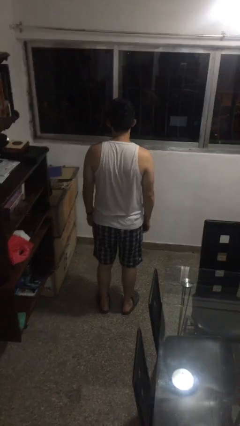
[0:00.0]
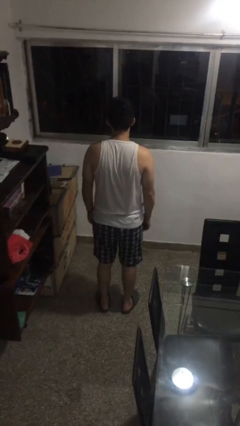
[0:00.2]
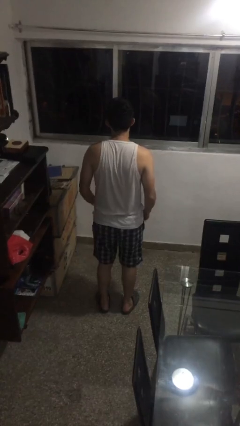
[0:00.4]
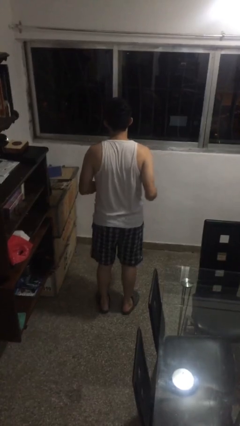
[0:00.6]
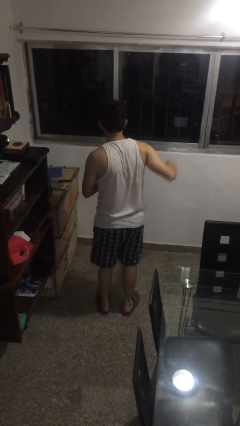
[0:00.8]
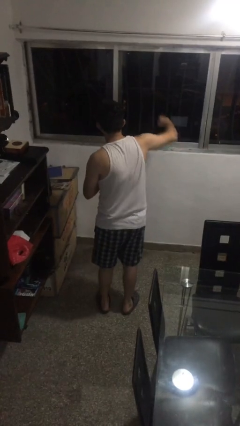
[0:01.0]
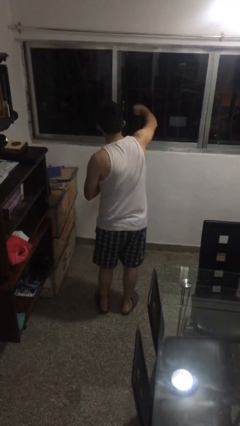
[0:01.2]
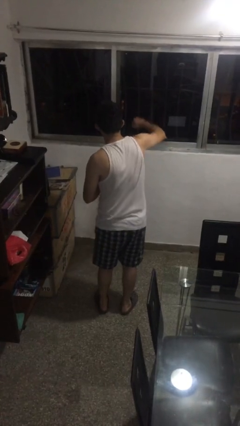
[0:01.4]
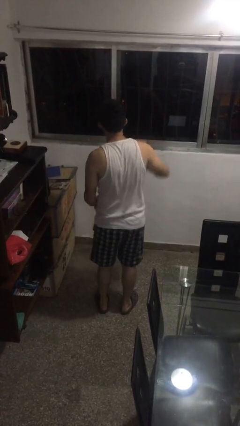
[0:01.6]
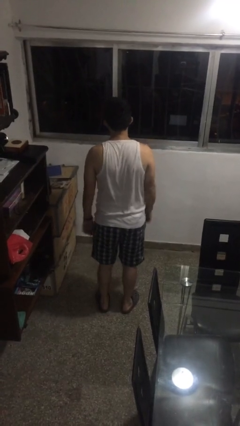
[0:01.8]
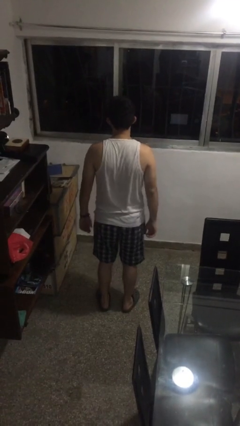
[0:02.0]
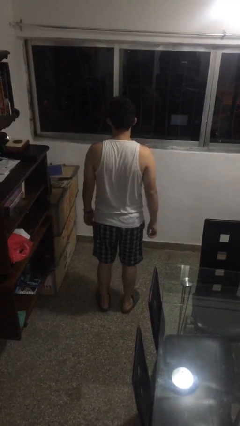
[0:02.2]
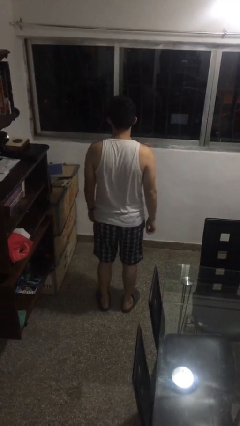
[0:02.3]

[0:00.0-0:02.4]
person punches

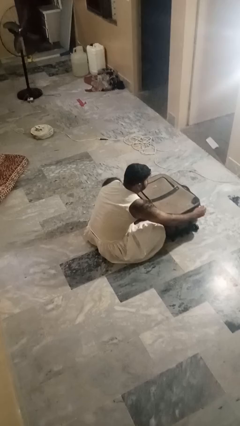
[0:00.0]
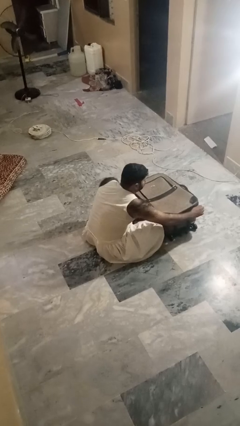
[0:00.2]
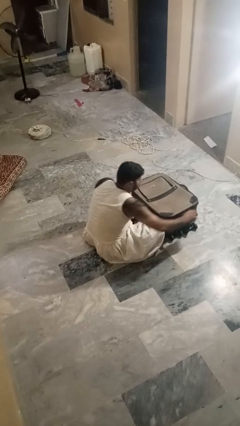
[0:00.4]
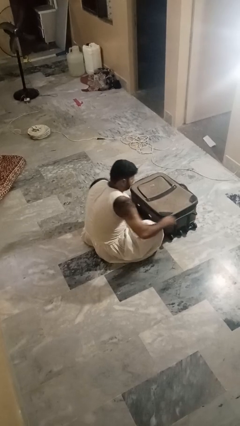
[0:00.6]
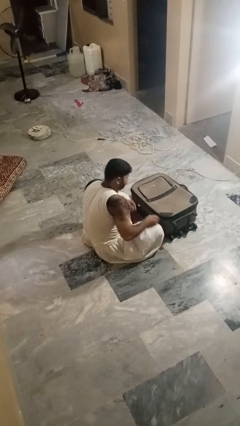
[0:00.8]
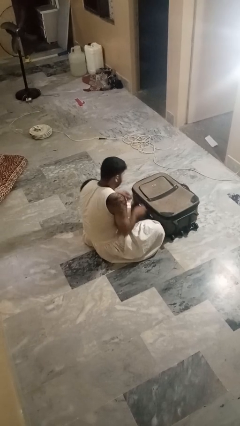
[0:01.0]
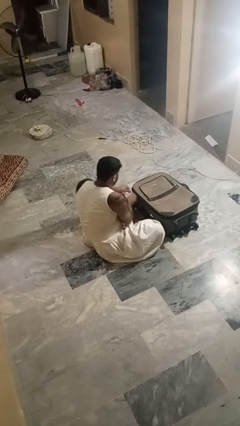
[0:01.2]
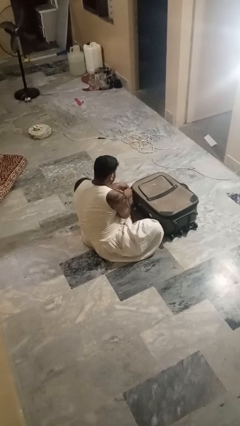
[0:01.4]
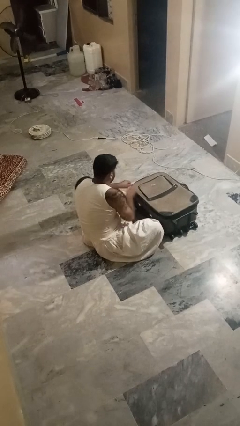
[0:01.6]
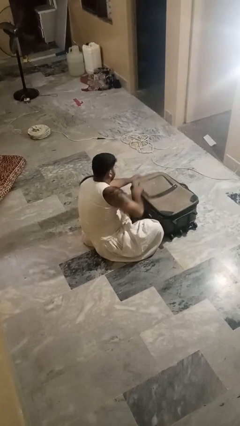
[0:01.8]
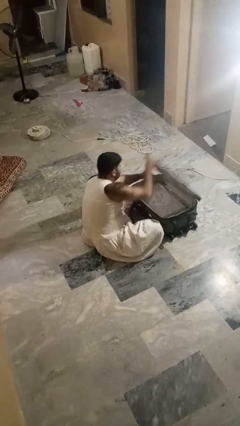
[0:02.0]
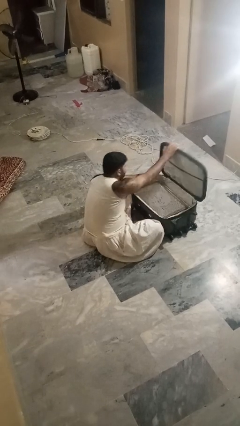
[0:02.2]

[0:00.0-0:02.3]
person opens suitcase

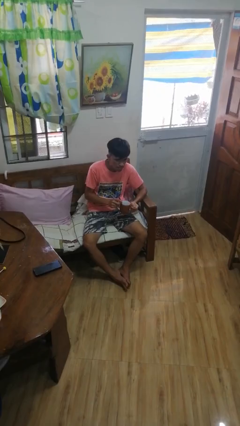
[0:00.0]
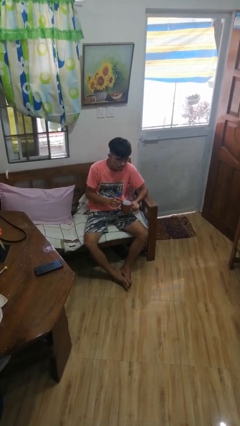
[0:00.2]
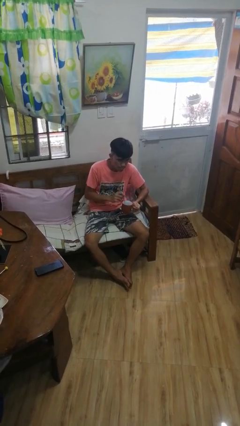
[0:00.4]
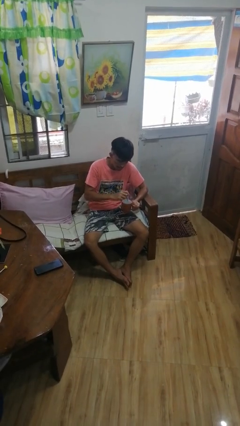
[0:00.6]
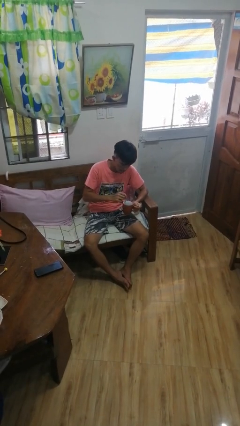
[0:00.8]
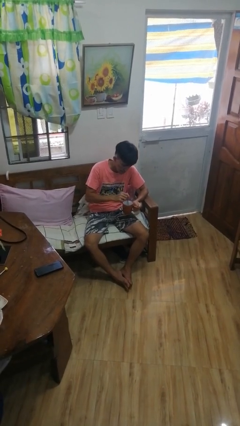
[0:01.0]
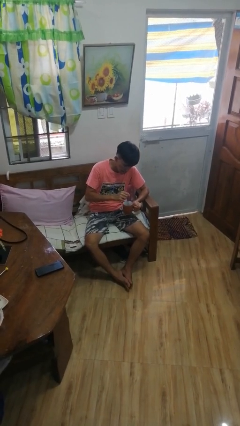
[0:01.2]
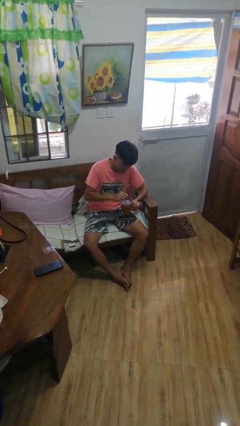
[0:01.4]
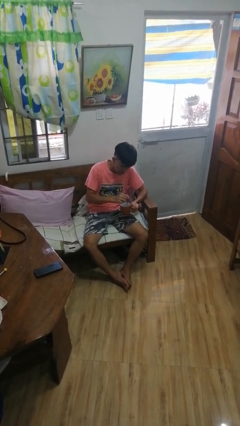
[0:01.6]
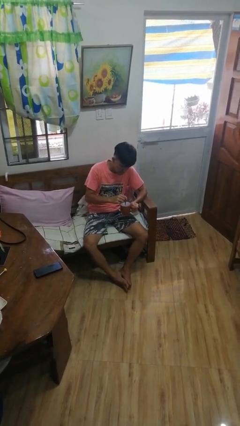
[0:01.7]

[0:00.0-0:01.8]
person stirs mug

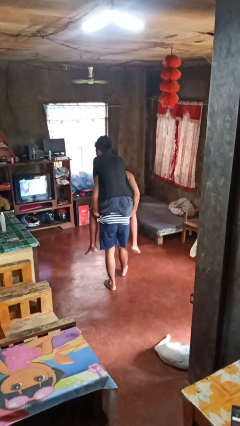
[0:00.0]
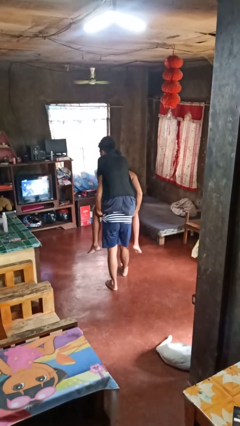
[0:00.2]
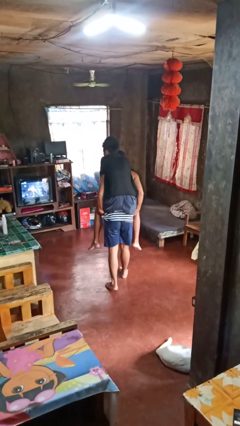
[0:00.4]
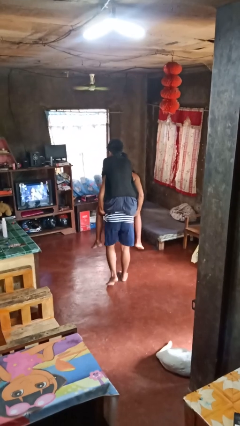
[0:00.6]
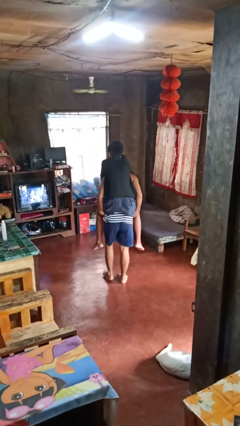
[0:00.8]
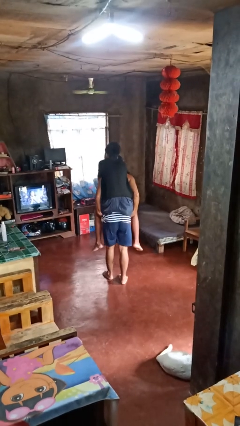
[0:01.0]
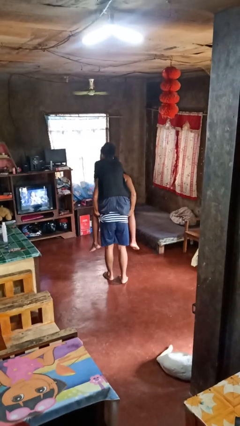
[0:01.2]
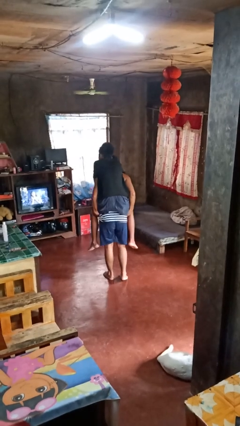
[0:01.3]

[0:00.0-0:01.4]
person carries person on back

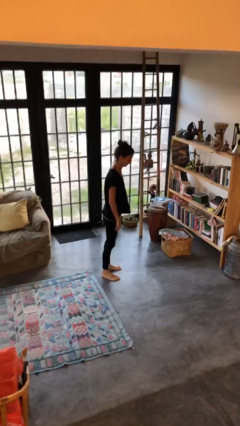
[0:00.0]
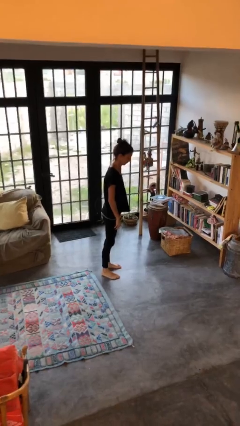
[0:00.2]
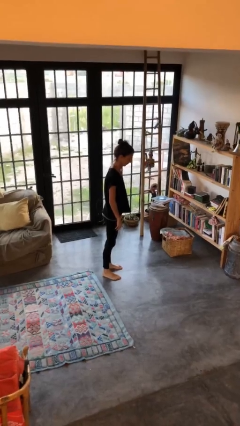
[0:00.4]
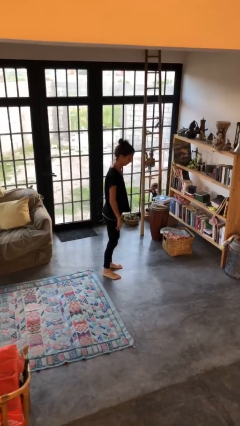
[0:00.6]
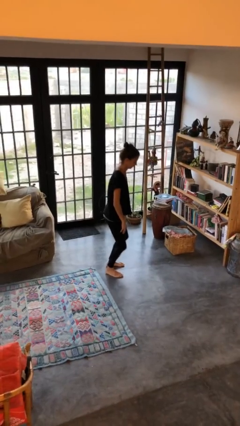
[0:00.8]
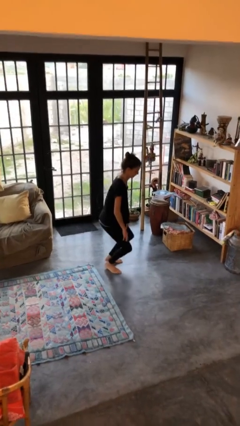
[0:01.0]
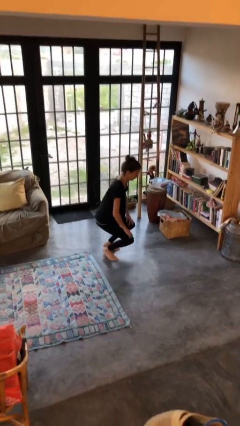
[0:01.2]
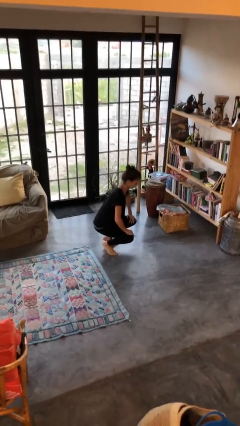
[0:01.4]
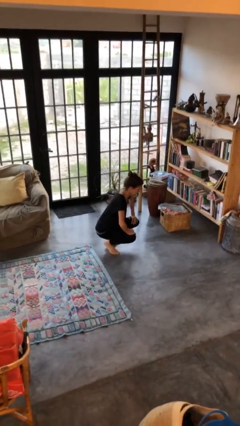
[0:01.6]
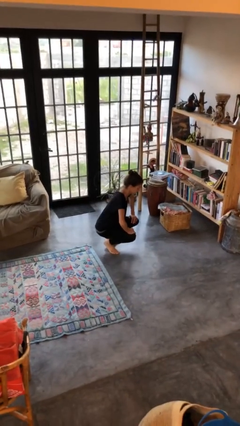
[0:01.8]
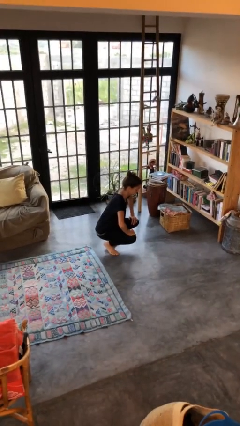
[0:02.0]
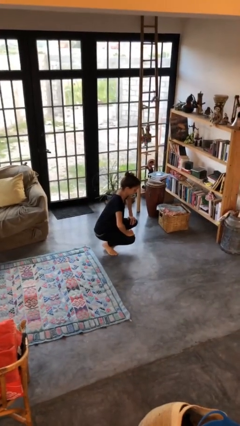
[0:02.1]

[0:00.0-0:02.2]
person squats

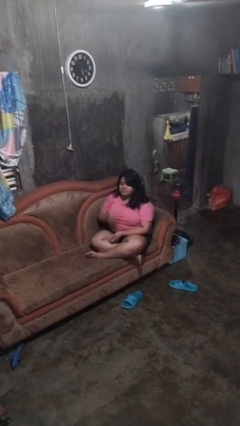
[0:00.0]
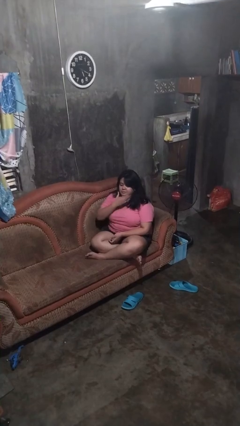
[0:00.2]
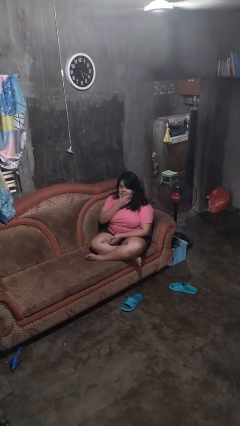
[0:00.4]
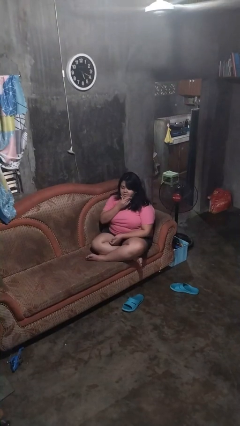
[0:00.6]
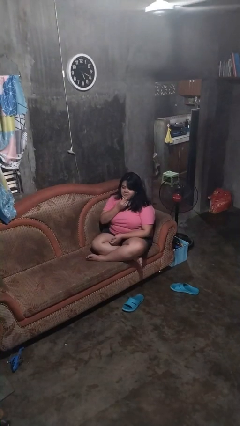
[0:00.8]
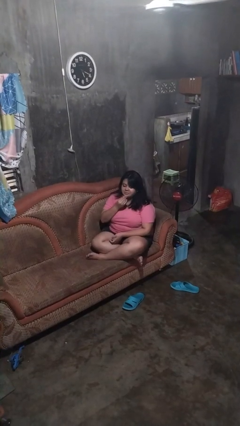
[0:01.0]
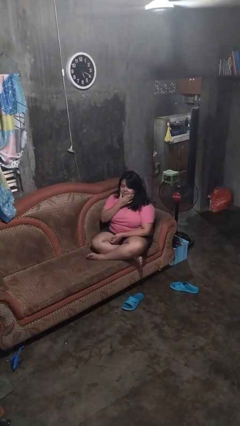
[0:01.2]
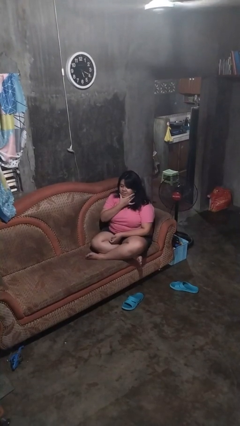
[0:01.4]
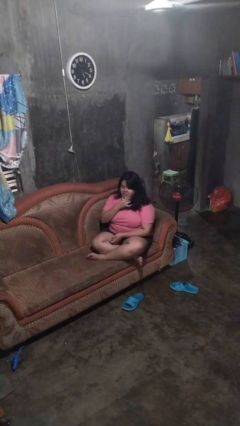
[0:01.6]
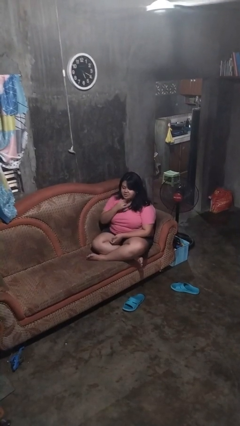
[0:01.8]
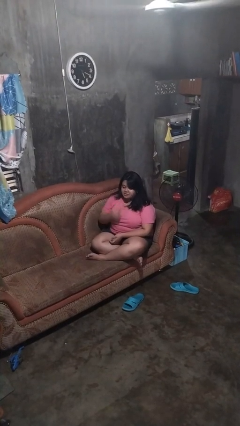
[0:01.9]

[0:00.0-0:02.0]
person strokes chin

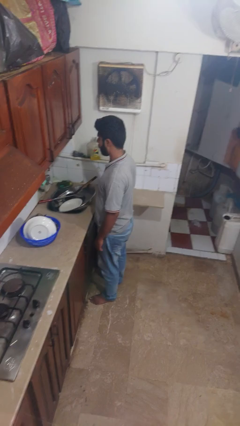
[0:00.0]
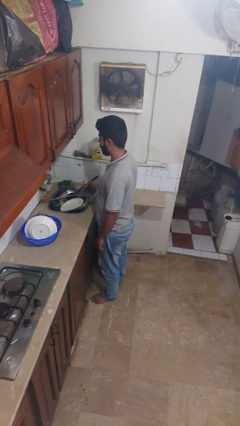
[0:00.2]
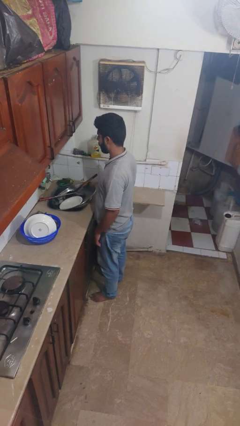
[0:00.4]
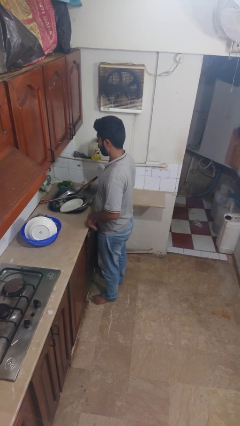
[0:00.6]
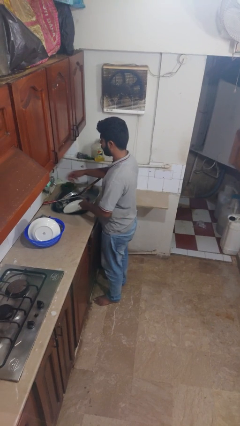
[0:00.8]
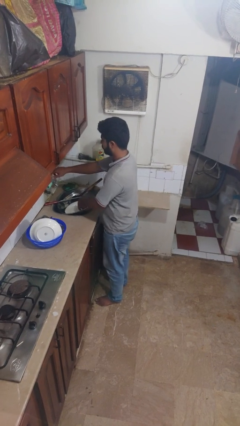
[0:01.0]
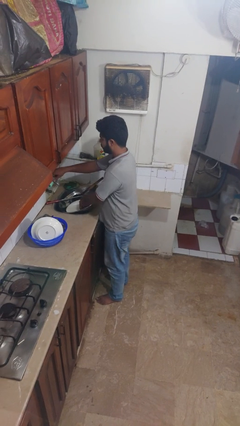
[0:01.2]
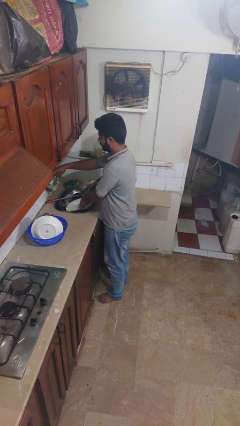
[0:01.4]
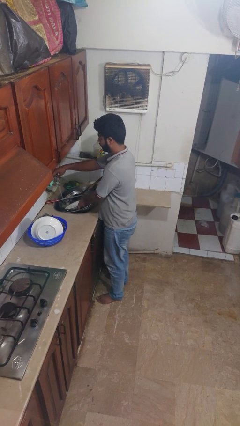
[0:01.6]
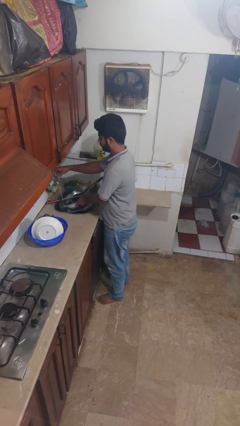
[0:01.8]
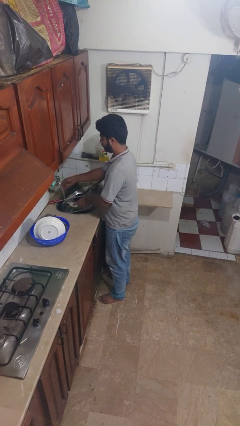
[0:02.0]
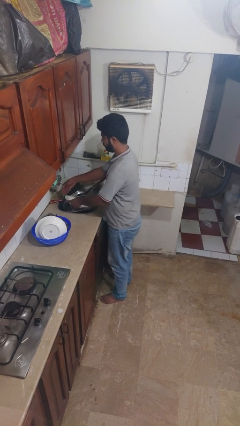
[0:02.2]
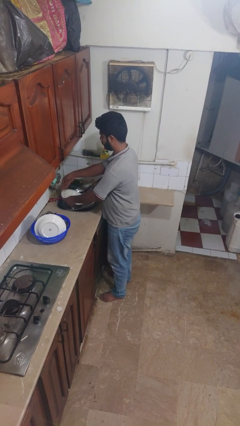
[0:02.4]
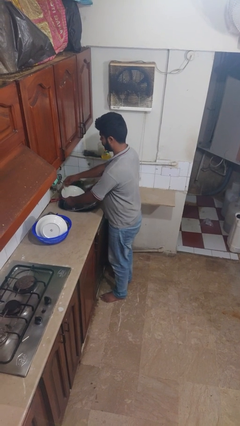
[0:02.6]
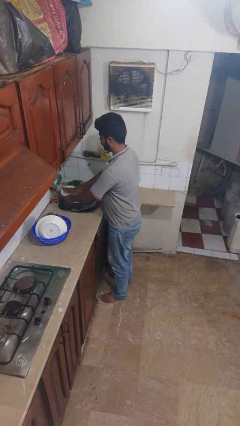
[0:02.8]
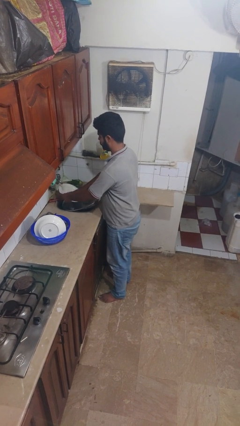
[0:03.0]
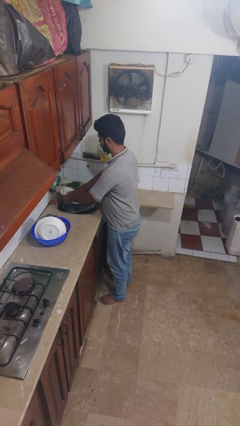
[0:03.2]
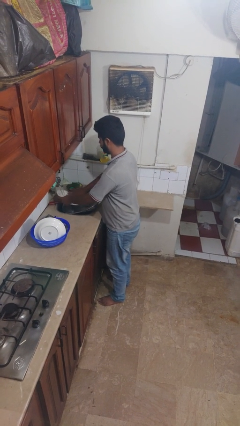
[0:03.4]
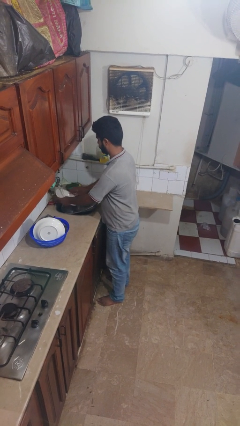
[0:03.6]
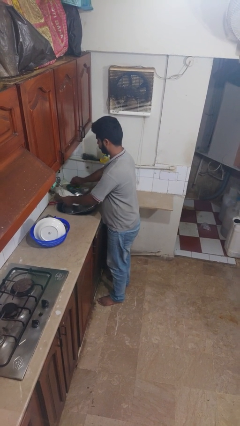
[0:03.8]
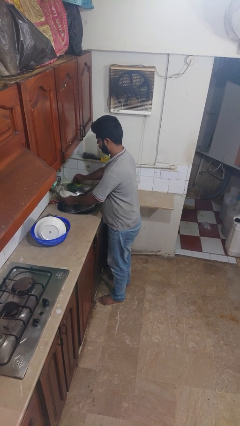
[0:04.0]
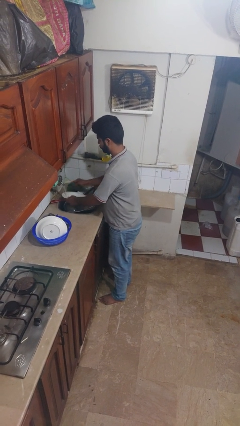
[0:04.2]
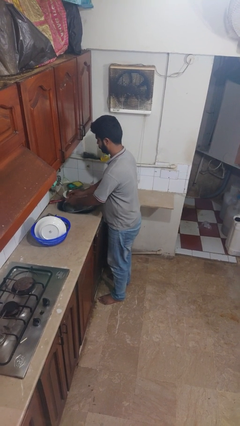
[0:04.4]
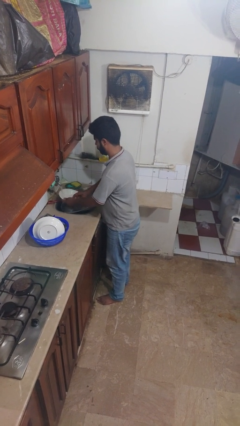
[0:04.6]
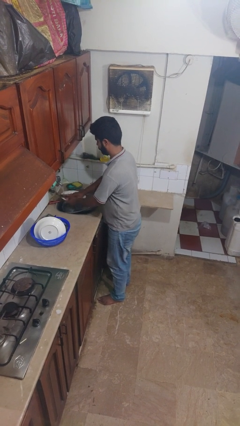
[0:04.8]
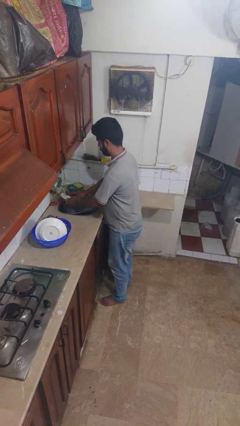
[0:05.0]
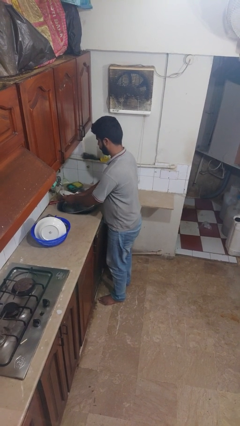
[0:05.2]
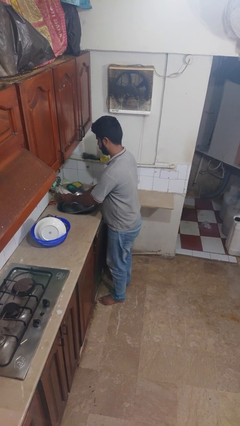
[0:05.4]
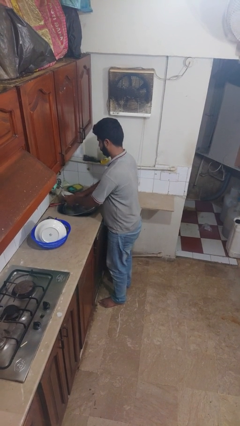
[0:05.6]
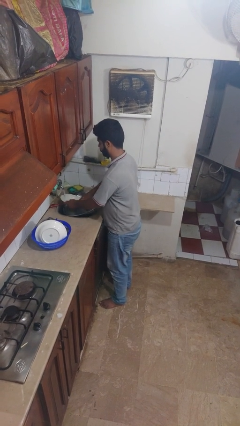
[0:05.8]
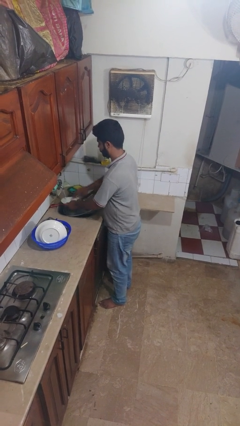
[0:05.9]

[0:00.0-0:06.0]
person washes dish
